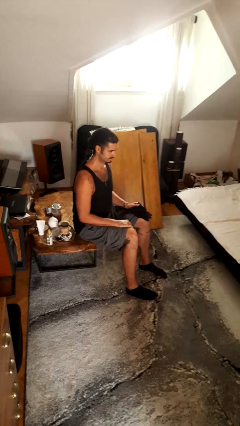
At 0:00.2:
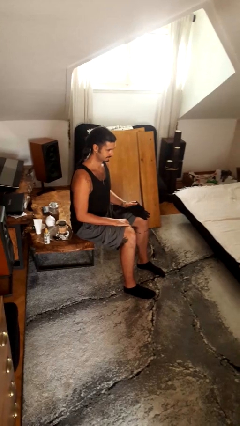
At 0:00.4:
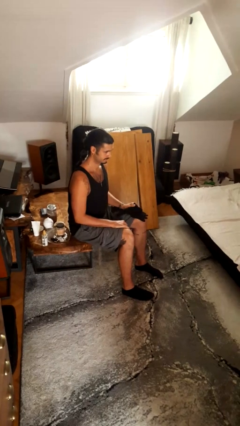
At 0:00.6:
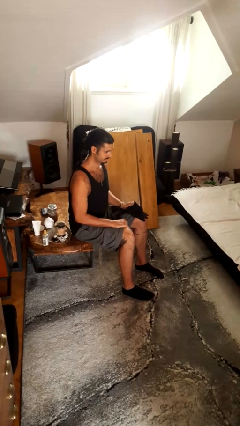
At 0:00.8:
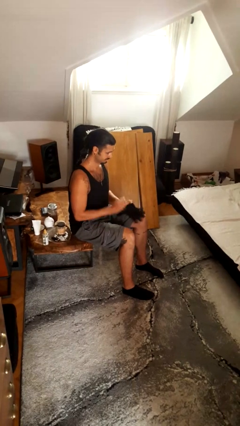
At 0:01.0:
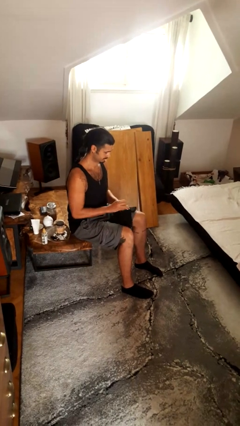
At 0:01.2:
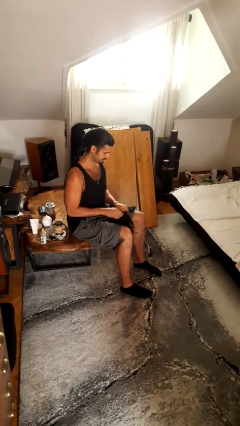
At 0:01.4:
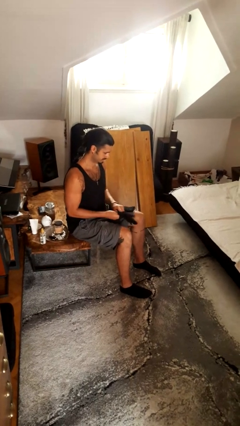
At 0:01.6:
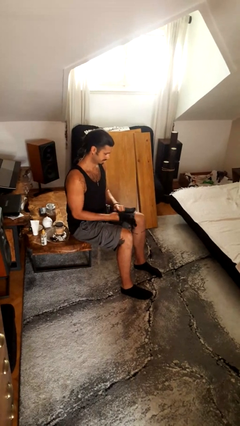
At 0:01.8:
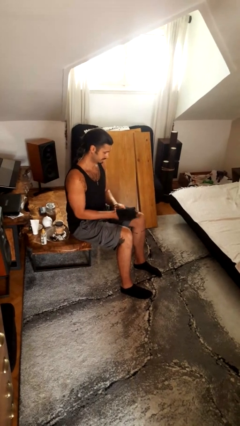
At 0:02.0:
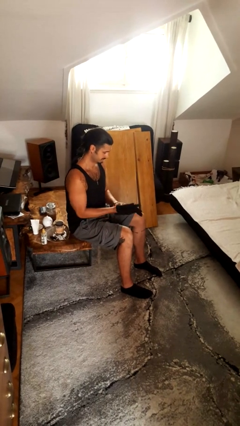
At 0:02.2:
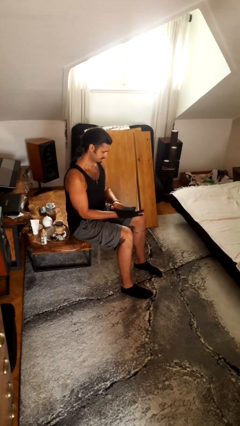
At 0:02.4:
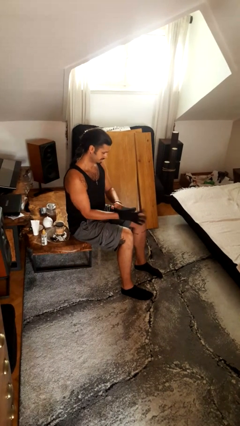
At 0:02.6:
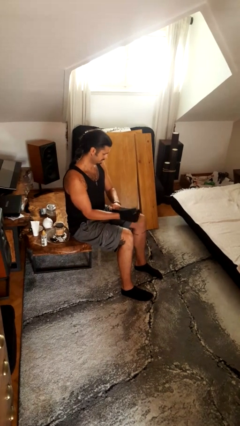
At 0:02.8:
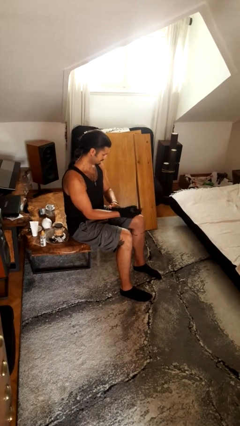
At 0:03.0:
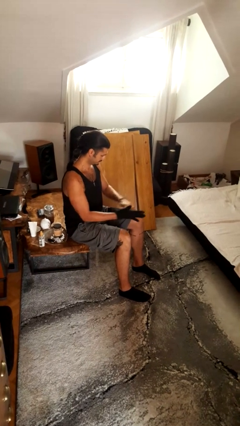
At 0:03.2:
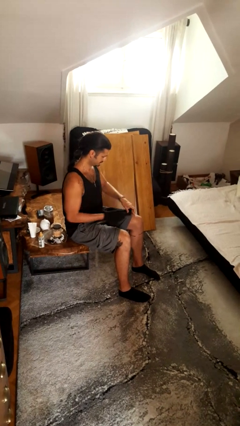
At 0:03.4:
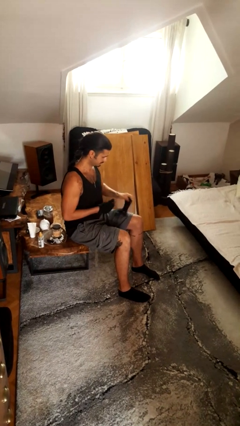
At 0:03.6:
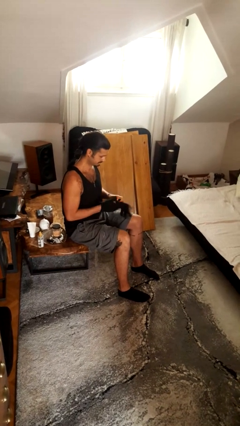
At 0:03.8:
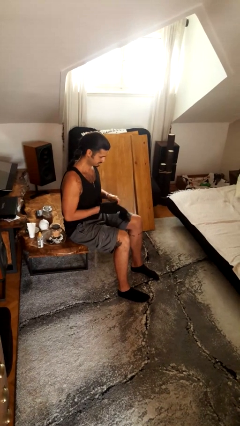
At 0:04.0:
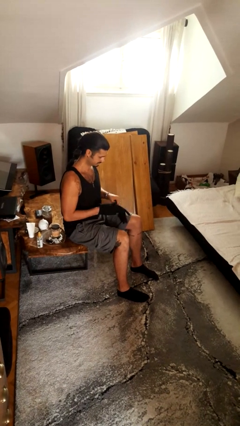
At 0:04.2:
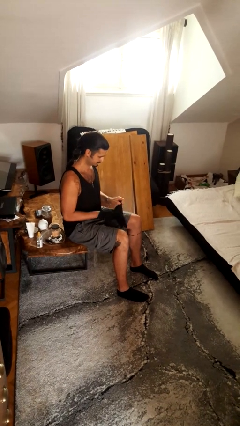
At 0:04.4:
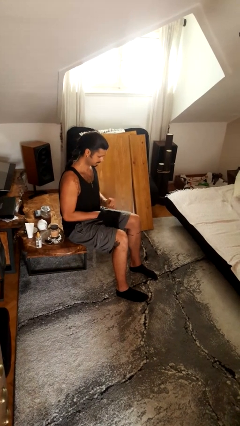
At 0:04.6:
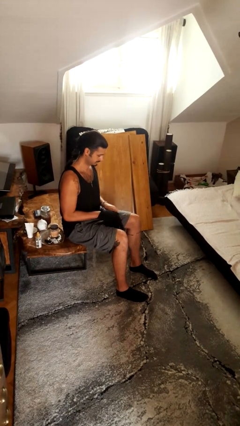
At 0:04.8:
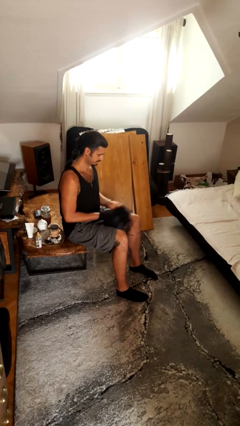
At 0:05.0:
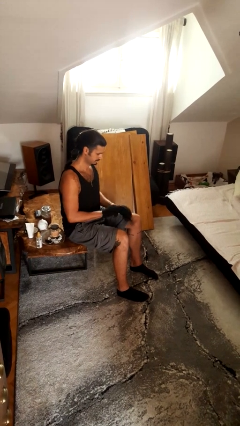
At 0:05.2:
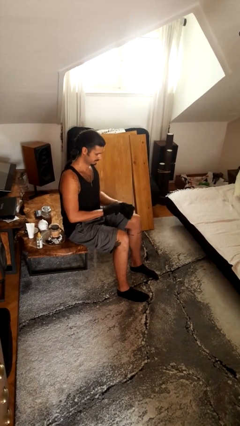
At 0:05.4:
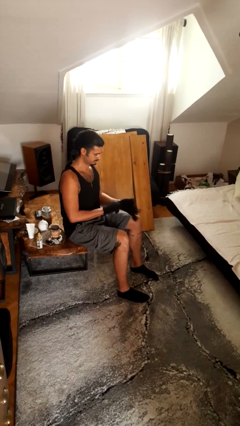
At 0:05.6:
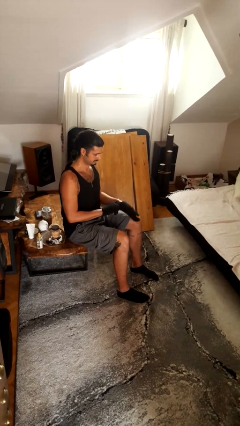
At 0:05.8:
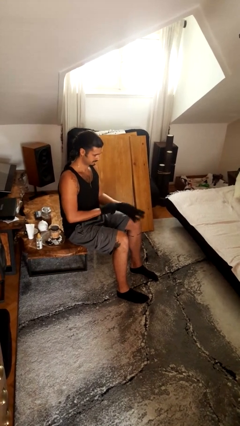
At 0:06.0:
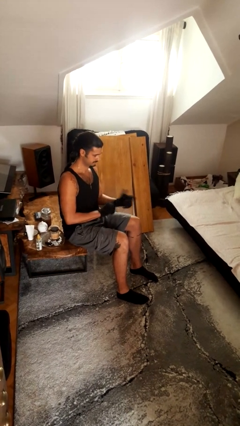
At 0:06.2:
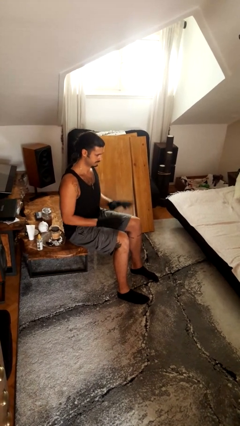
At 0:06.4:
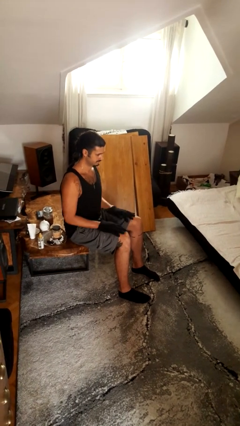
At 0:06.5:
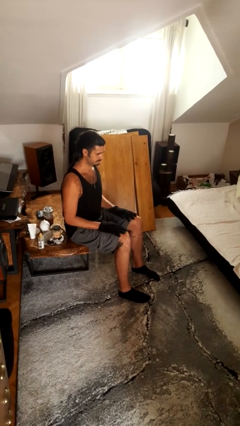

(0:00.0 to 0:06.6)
person puts on gloves

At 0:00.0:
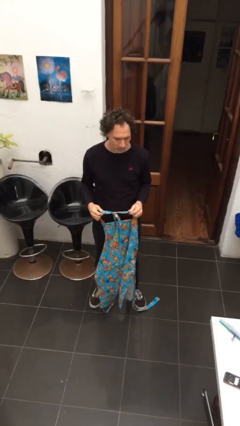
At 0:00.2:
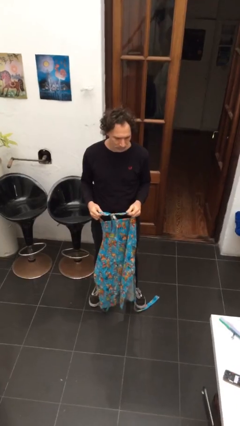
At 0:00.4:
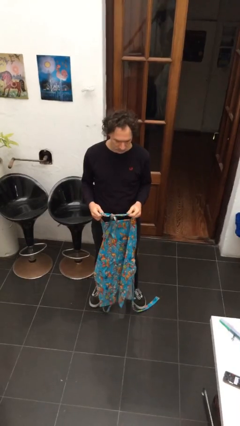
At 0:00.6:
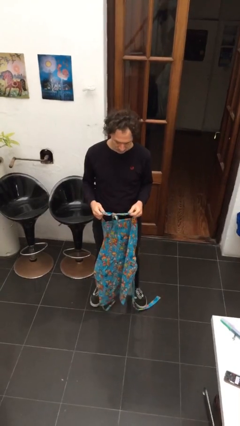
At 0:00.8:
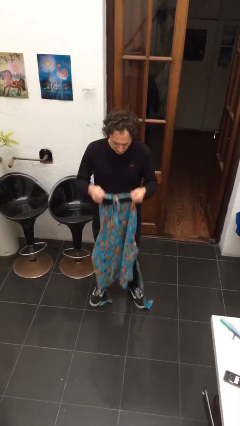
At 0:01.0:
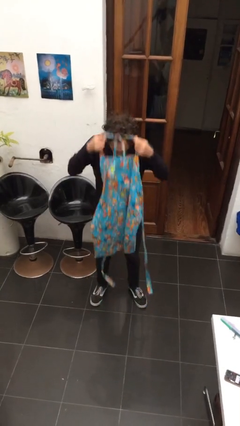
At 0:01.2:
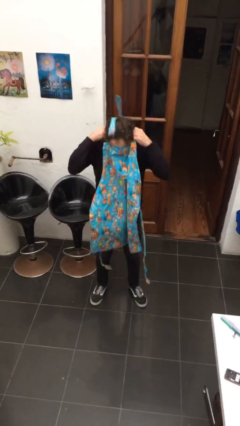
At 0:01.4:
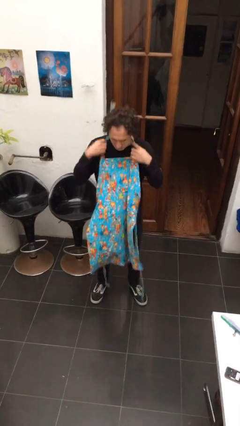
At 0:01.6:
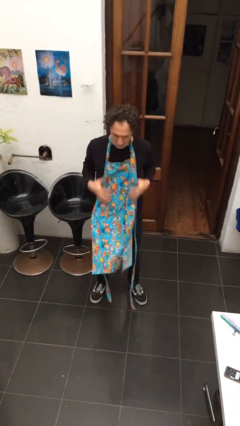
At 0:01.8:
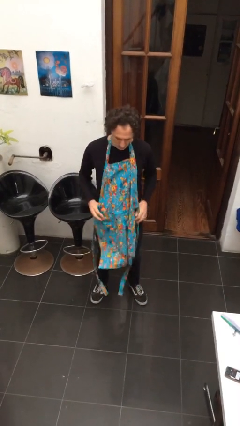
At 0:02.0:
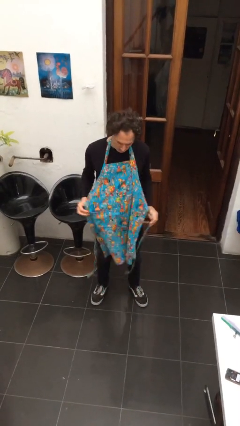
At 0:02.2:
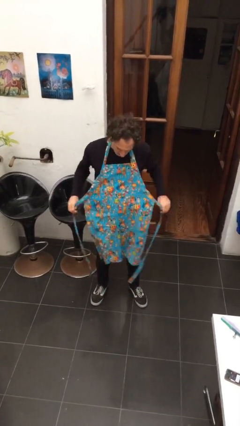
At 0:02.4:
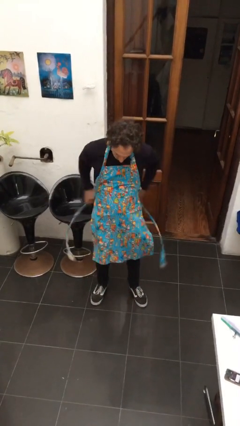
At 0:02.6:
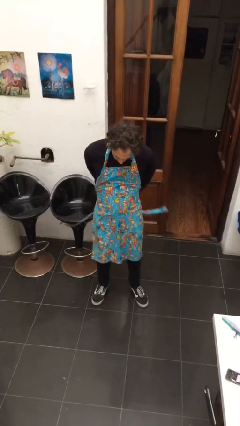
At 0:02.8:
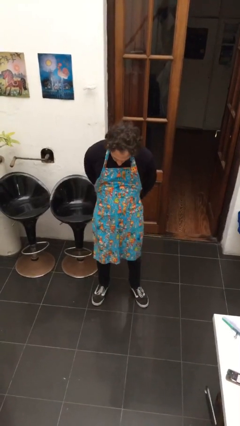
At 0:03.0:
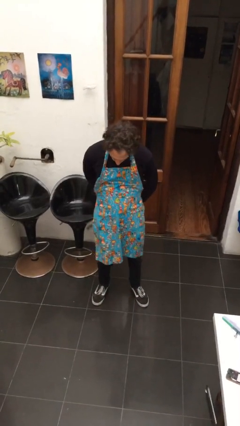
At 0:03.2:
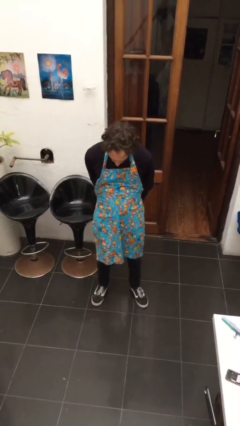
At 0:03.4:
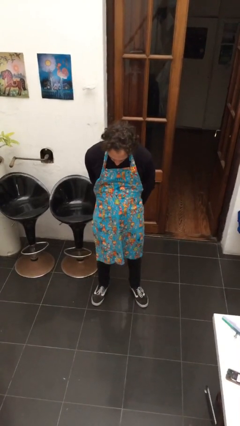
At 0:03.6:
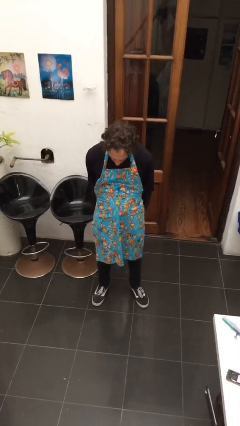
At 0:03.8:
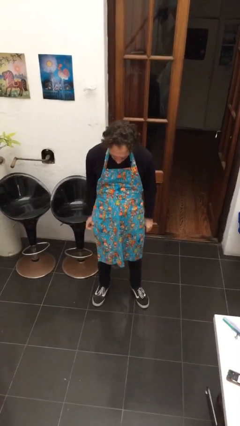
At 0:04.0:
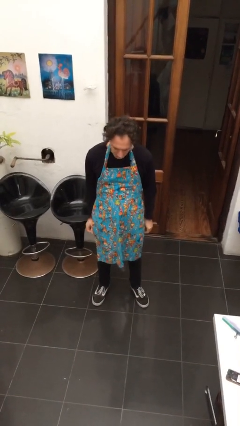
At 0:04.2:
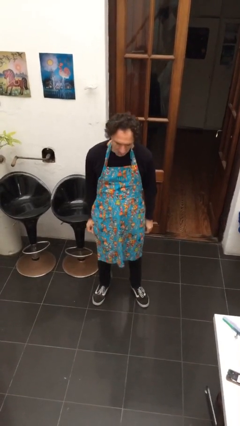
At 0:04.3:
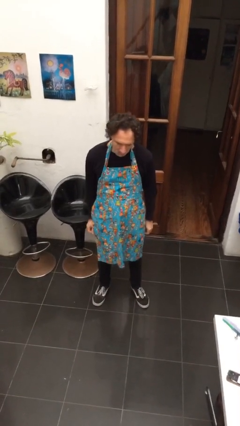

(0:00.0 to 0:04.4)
person puts on apron

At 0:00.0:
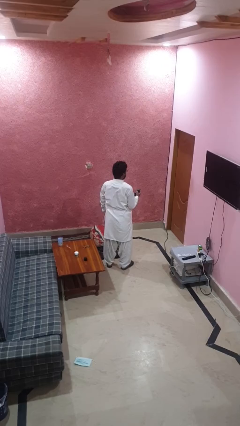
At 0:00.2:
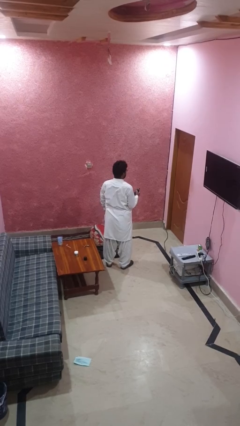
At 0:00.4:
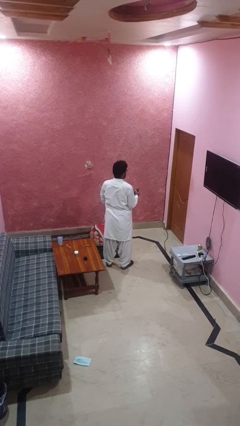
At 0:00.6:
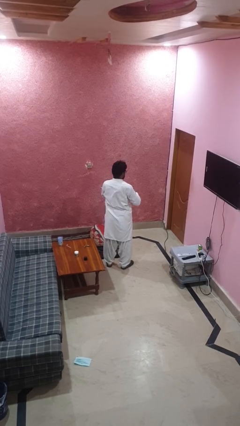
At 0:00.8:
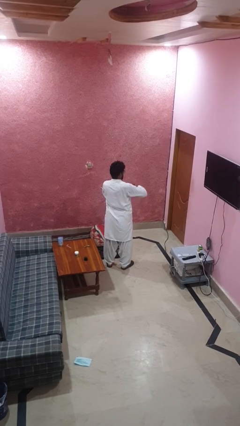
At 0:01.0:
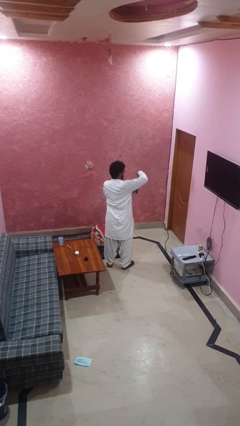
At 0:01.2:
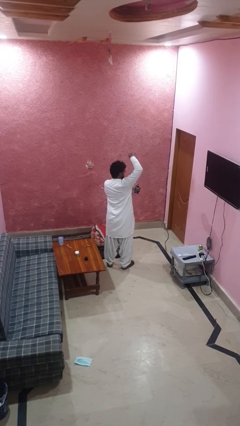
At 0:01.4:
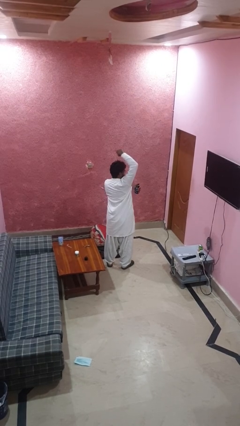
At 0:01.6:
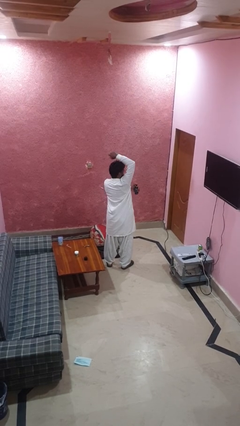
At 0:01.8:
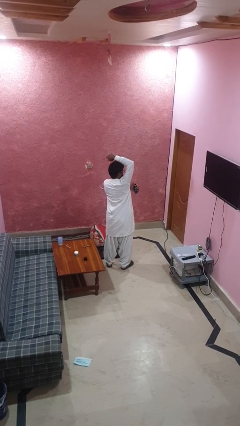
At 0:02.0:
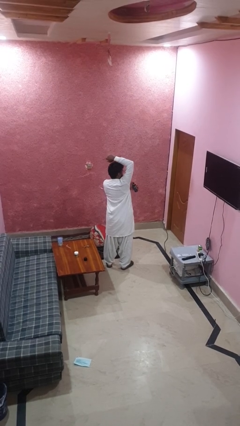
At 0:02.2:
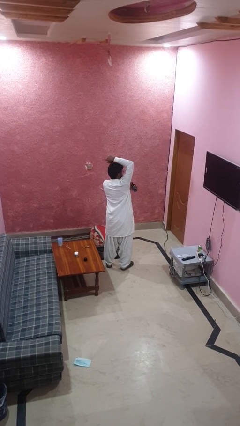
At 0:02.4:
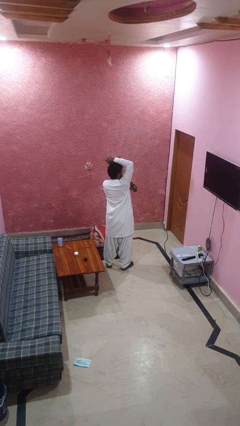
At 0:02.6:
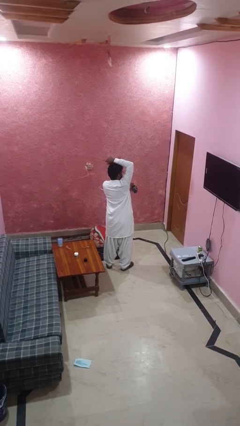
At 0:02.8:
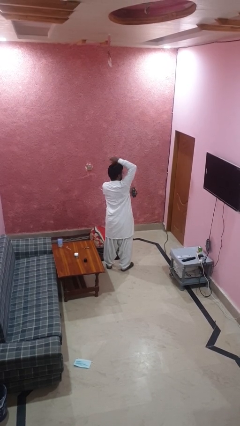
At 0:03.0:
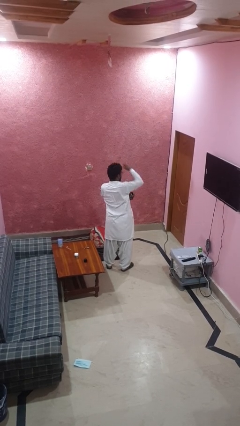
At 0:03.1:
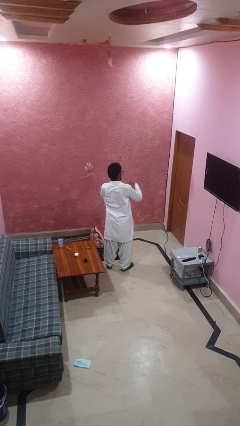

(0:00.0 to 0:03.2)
person applies deodorant

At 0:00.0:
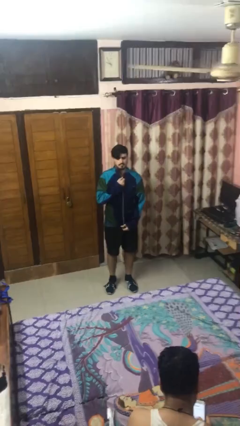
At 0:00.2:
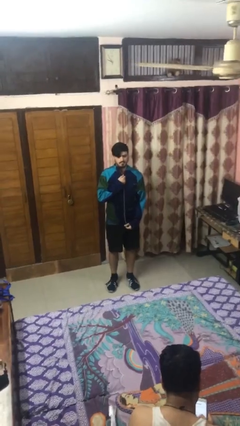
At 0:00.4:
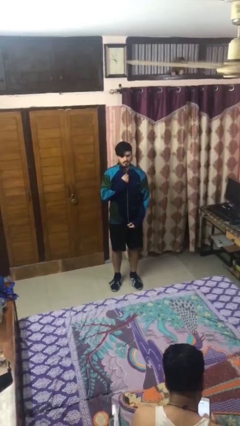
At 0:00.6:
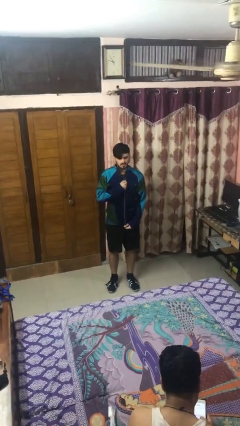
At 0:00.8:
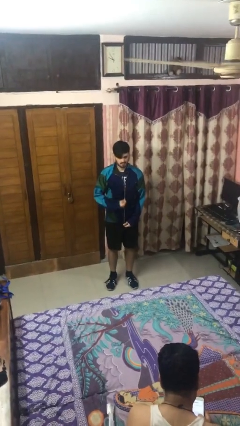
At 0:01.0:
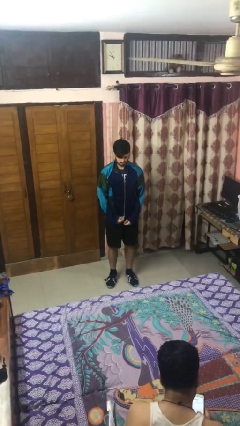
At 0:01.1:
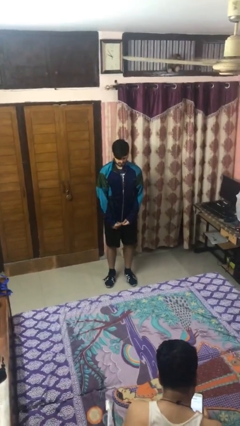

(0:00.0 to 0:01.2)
person unzips jacket

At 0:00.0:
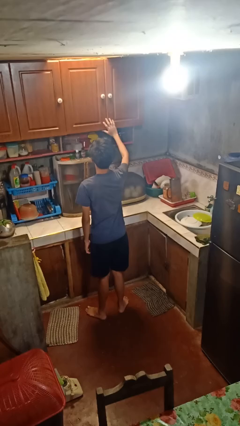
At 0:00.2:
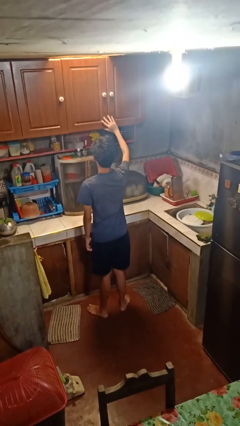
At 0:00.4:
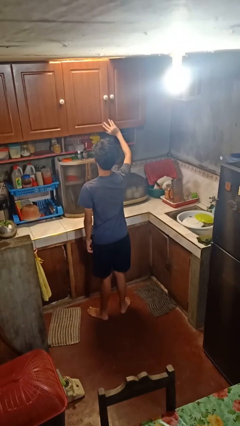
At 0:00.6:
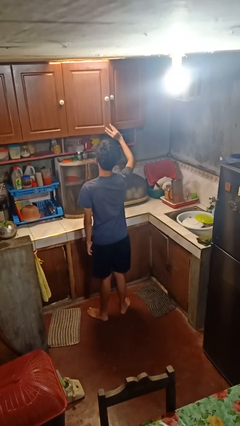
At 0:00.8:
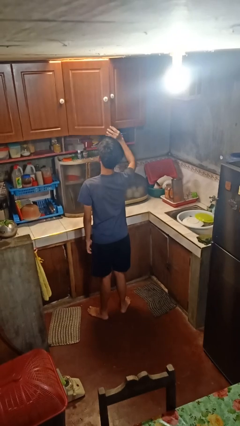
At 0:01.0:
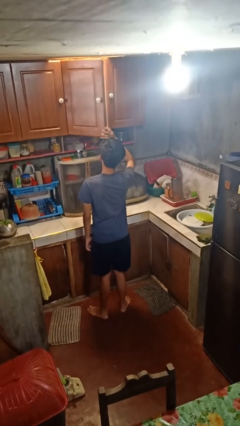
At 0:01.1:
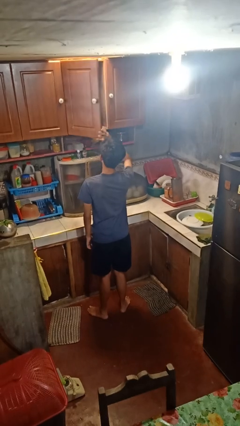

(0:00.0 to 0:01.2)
person opens cabinet

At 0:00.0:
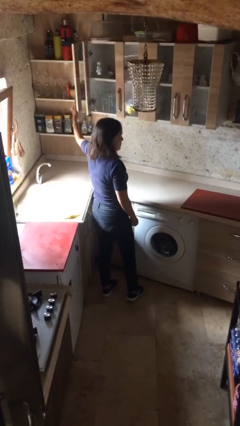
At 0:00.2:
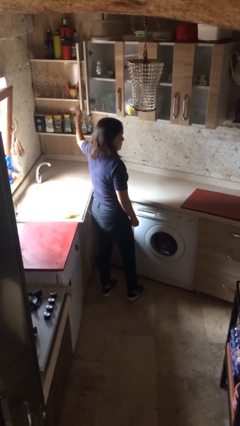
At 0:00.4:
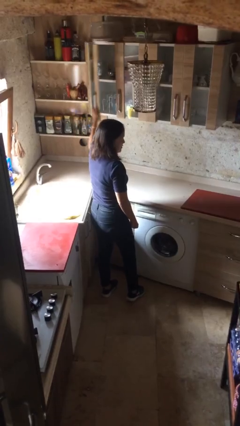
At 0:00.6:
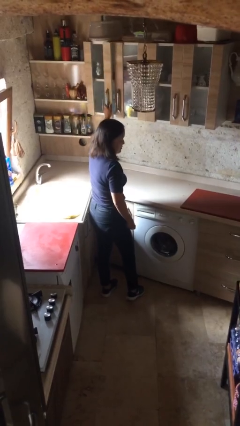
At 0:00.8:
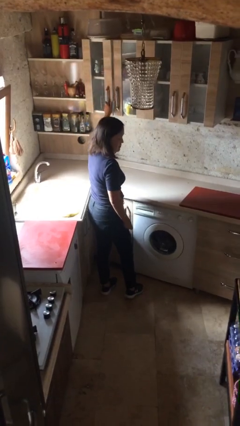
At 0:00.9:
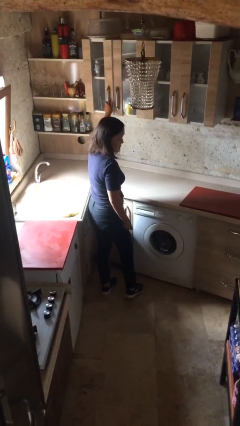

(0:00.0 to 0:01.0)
person closes cabinet
